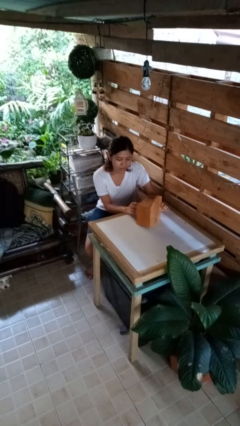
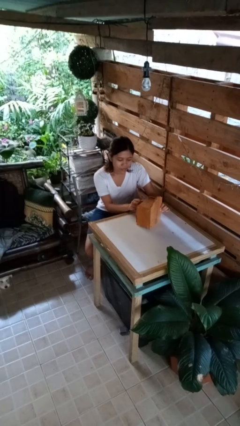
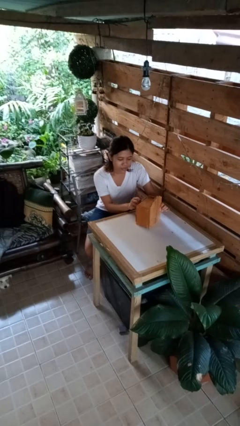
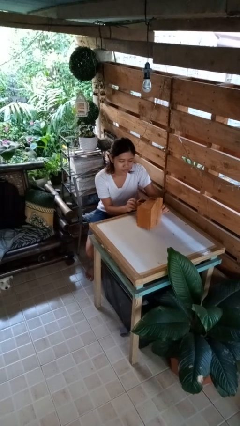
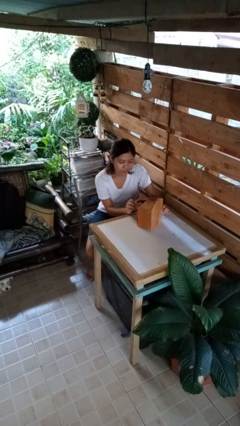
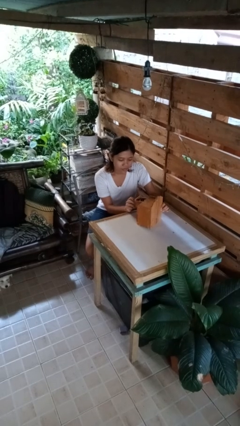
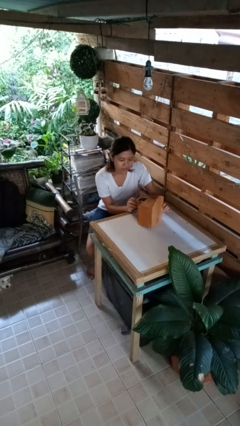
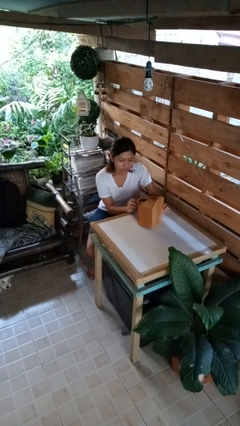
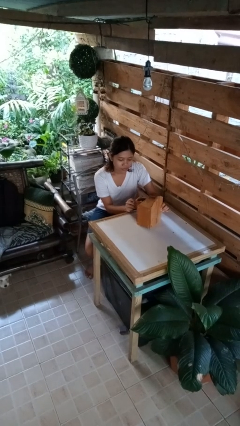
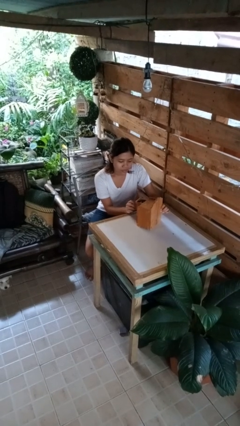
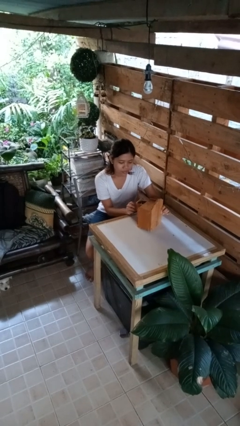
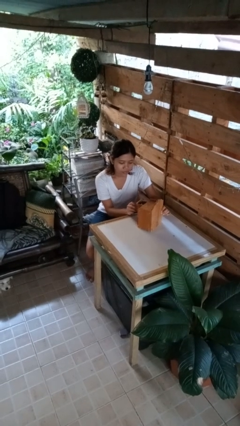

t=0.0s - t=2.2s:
person opens jewelry box

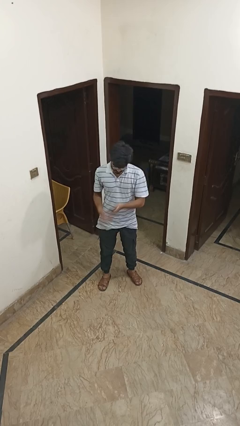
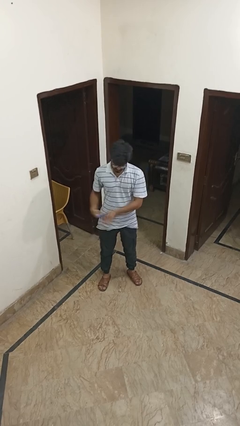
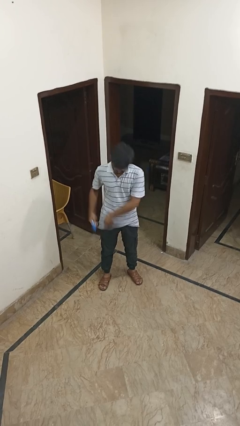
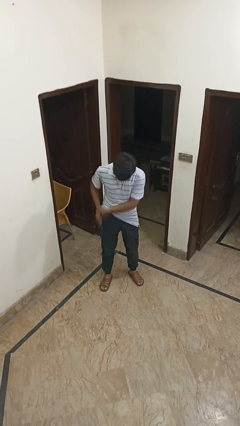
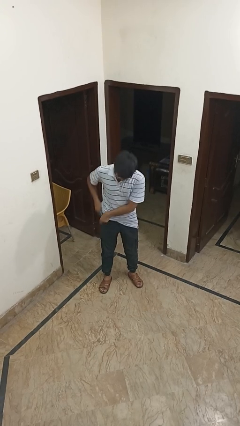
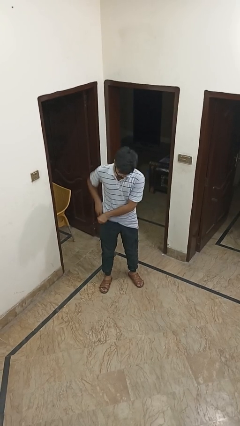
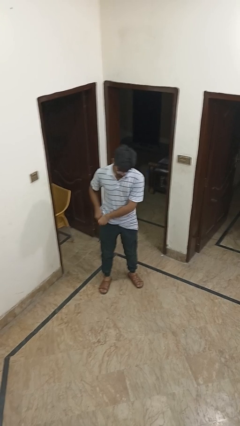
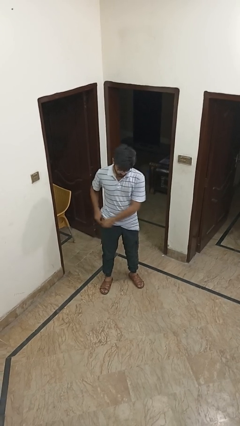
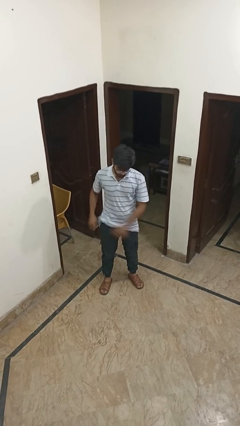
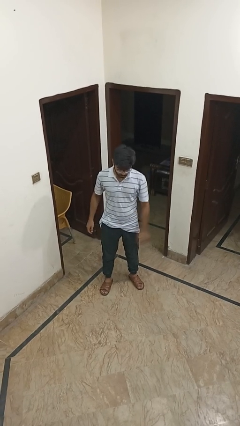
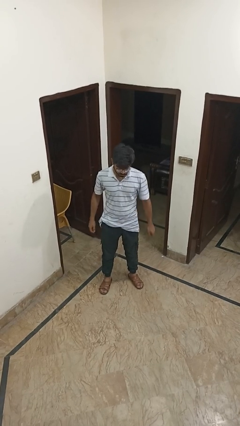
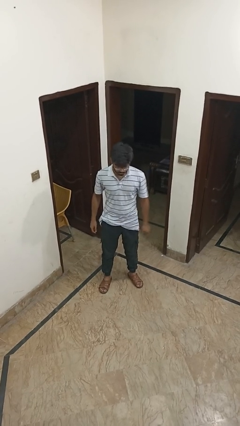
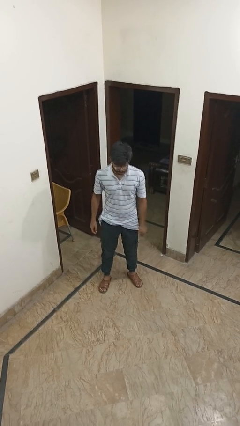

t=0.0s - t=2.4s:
person puts phone into pocket

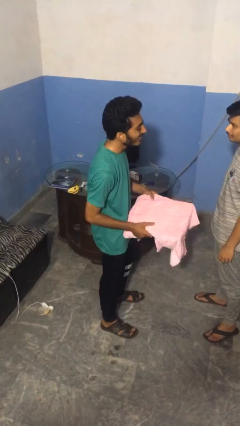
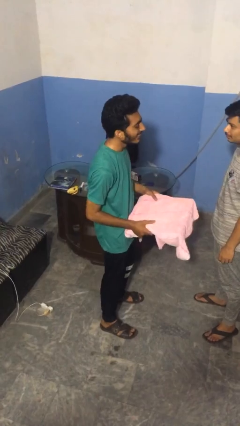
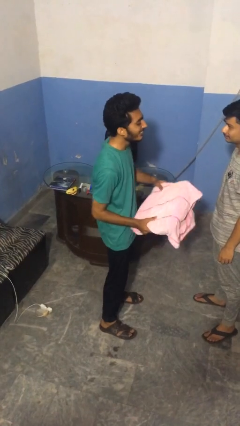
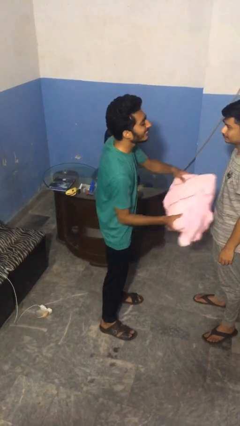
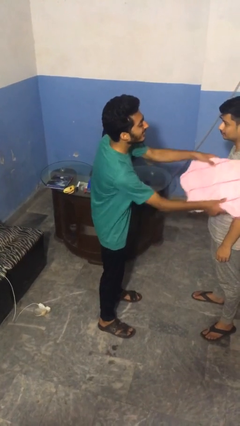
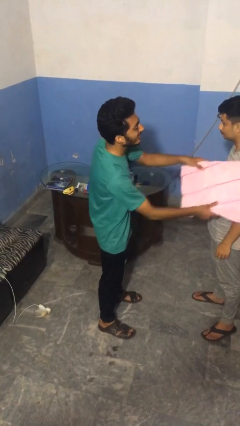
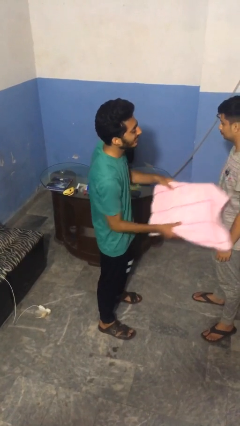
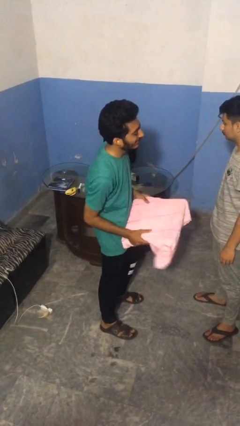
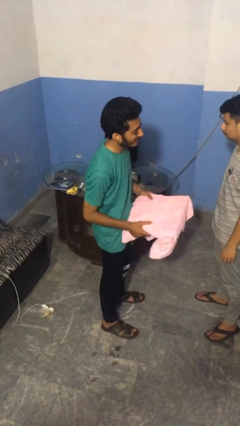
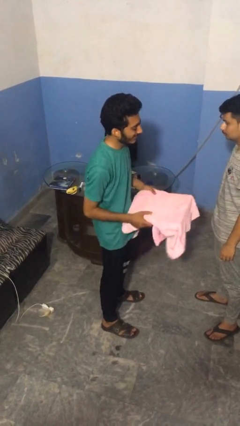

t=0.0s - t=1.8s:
person hits person with pillow

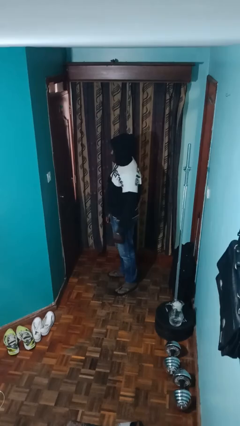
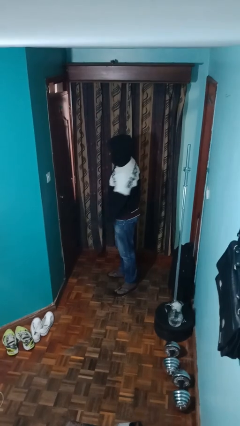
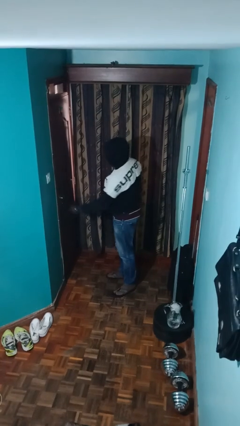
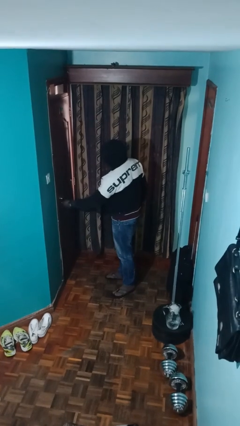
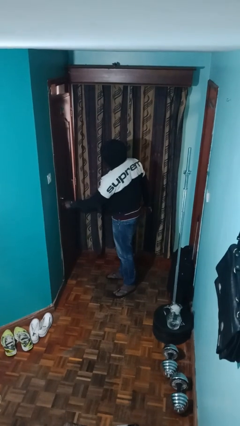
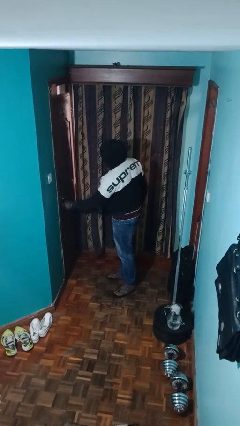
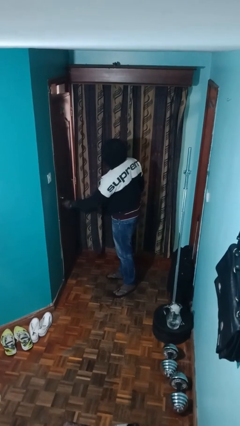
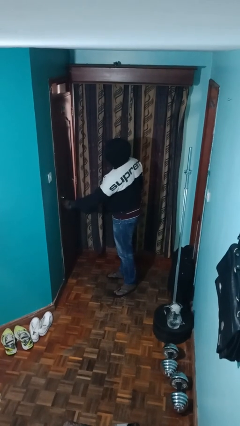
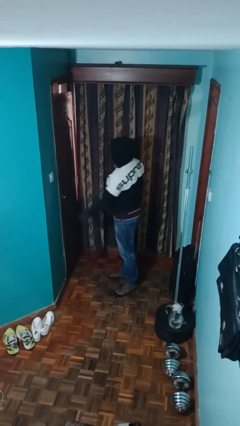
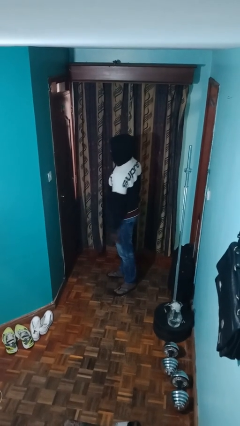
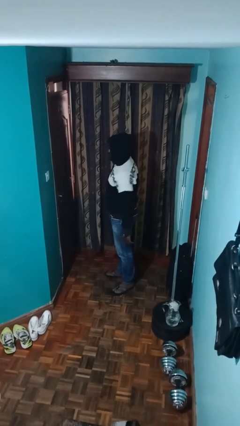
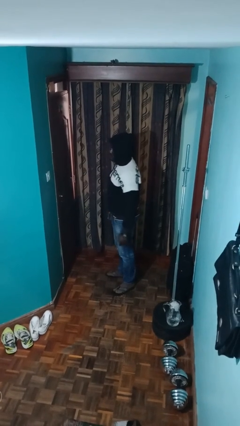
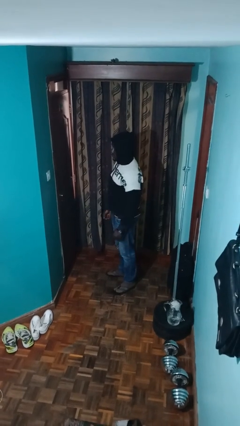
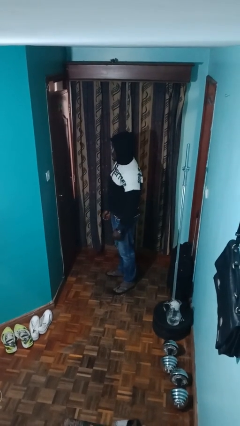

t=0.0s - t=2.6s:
person unlocks door with keys

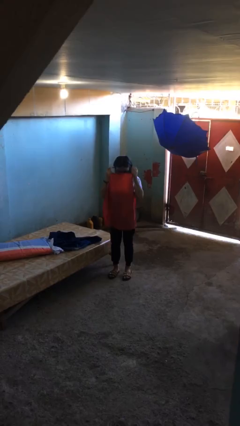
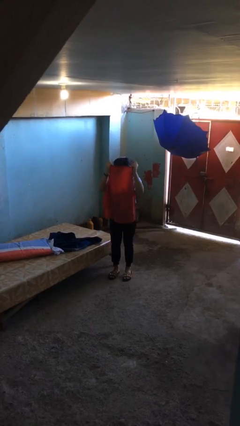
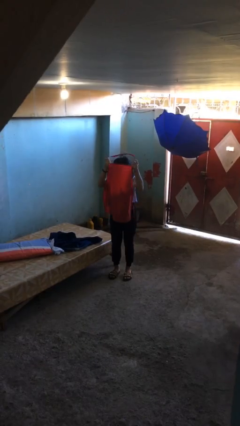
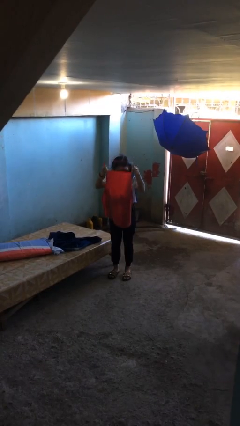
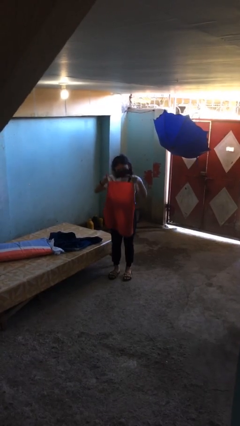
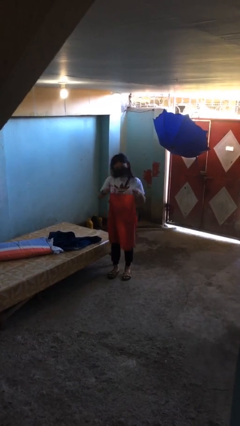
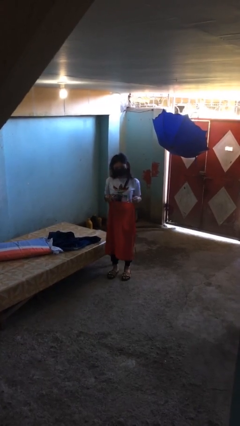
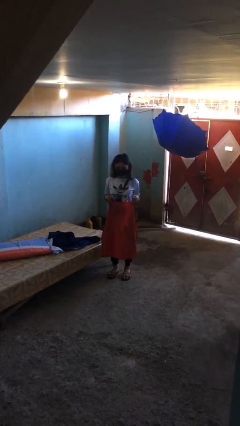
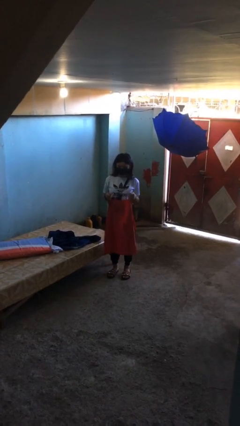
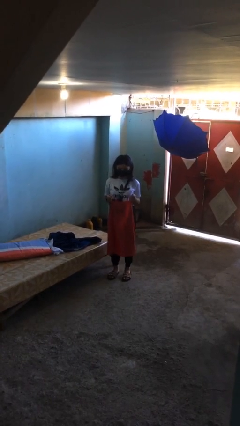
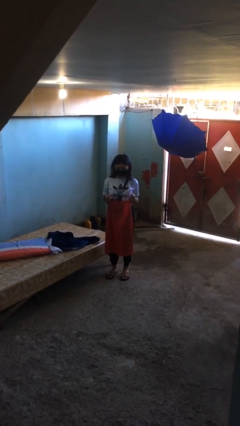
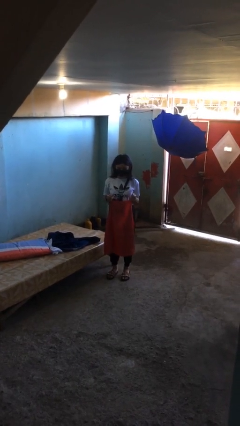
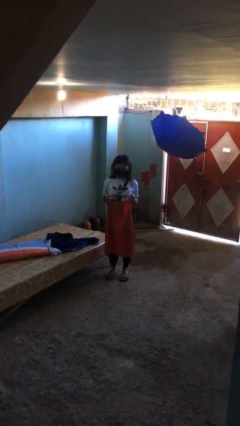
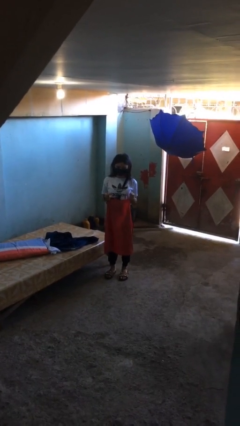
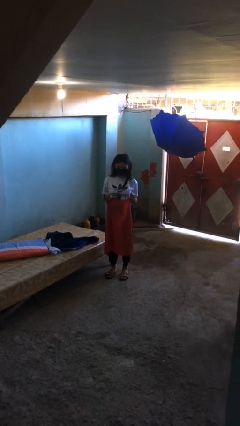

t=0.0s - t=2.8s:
person takes off apron

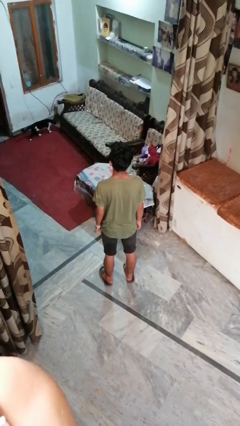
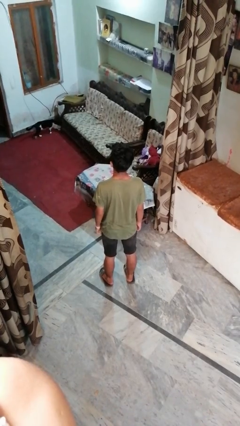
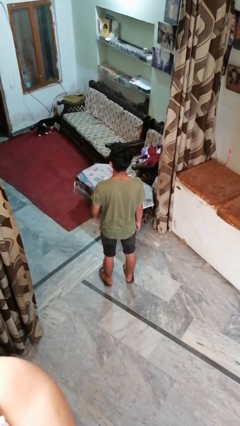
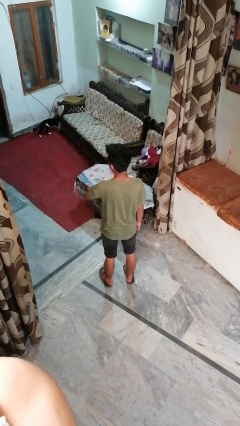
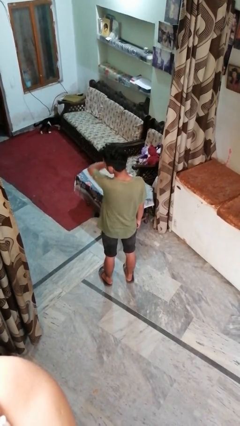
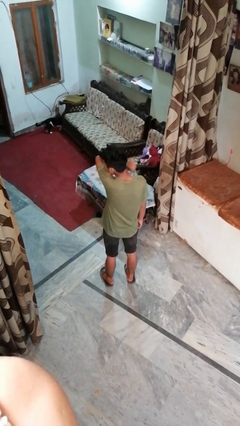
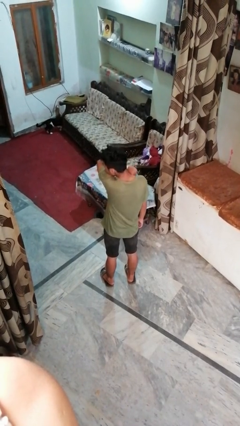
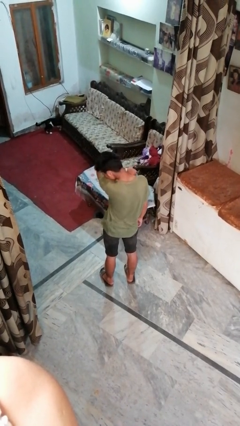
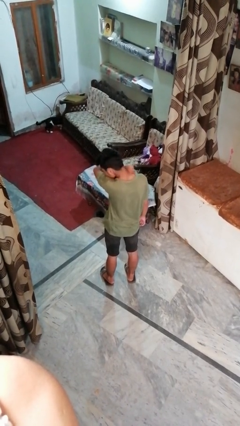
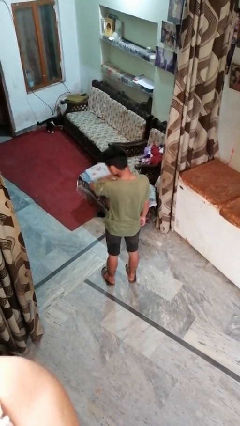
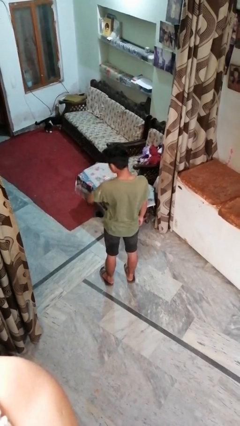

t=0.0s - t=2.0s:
person sneezes into arm

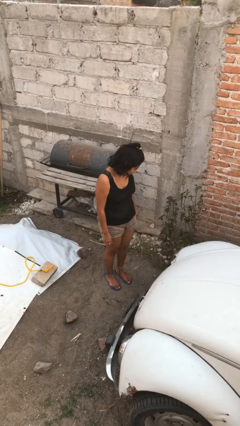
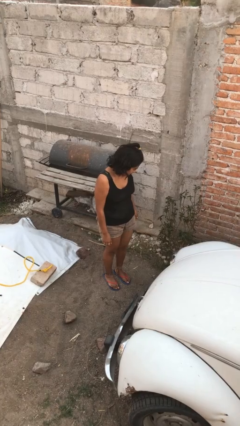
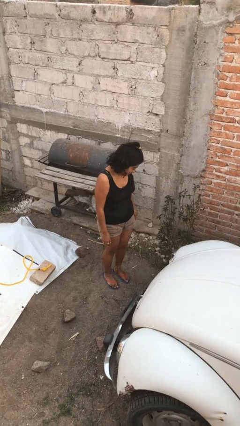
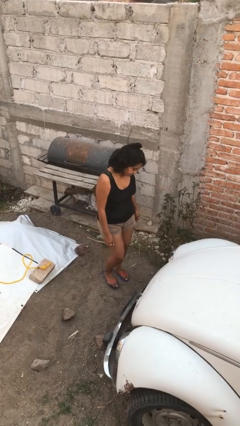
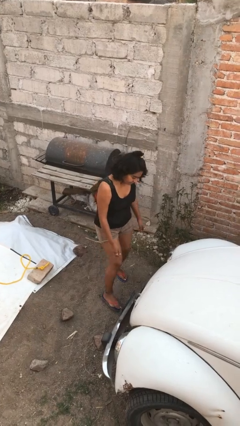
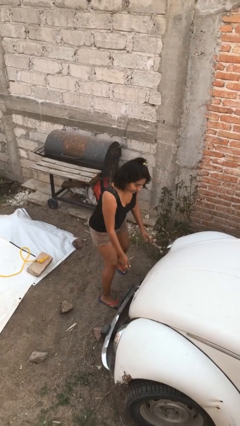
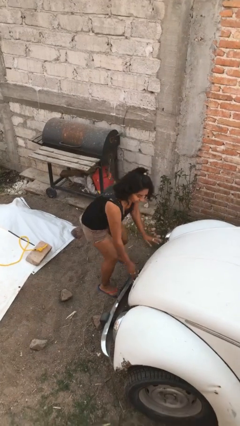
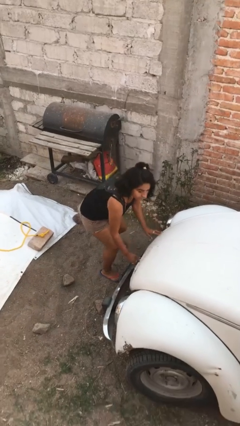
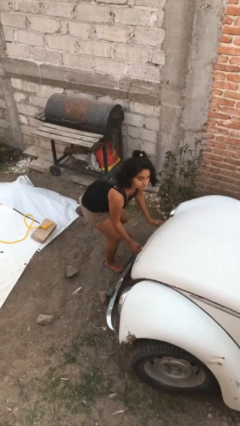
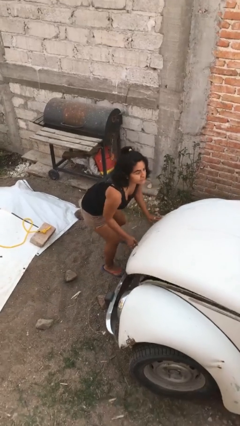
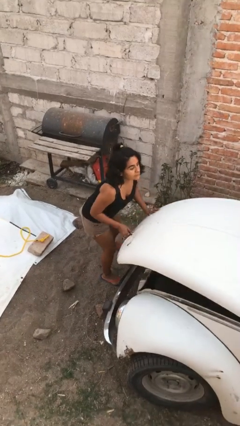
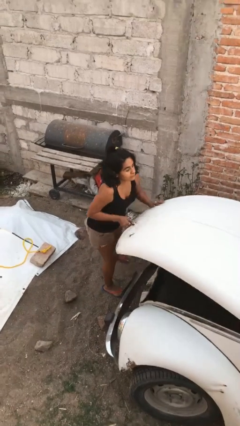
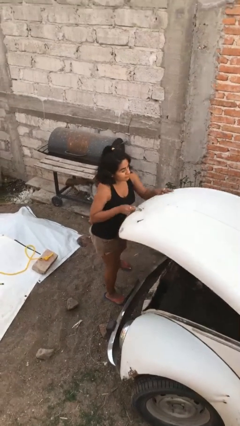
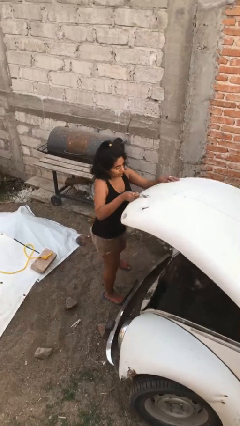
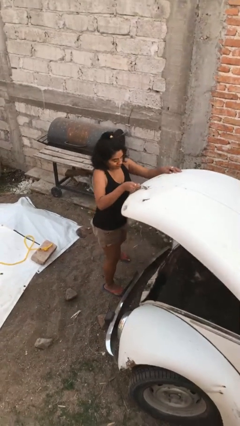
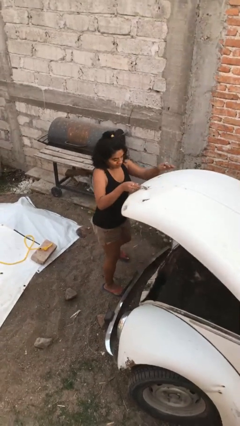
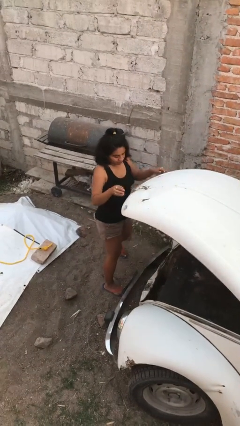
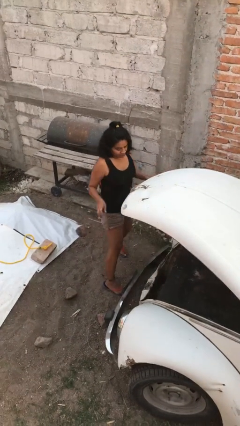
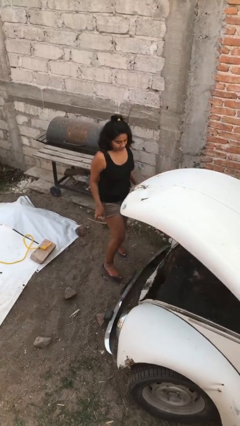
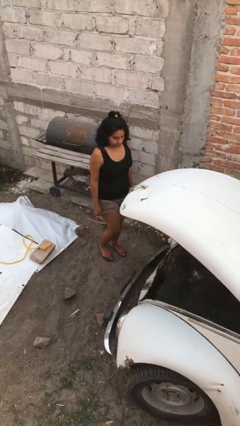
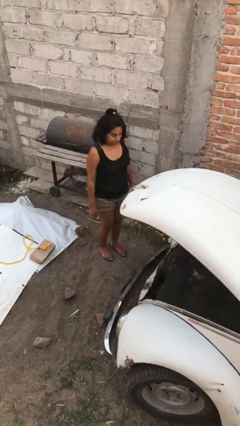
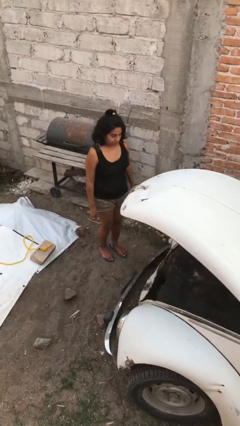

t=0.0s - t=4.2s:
person opens car trunk
